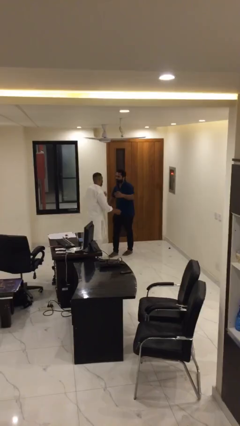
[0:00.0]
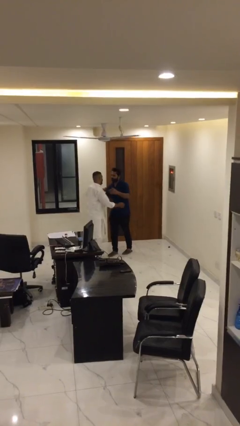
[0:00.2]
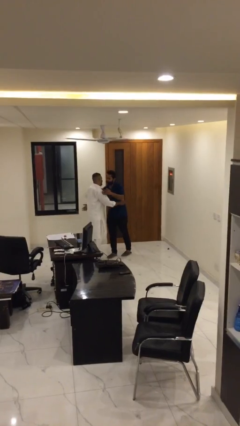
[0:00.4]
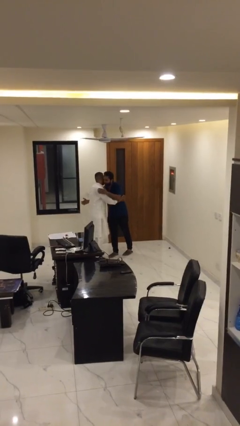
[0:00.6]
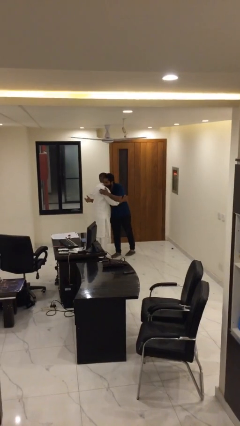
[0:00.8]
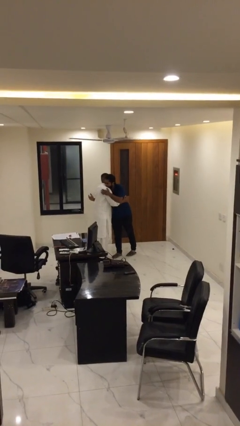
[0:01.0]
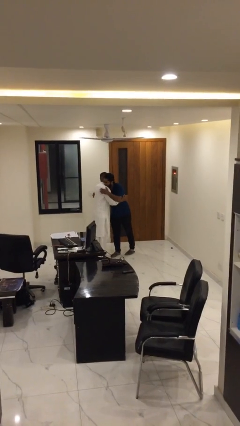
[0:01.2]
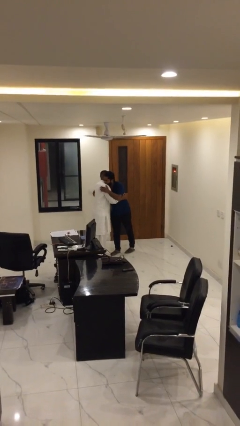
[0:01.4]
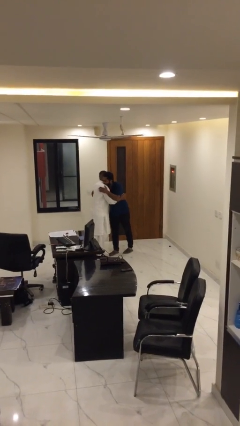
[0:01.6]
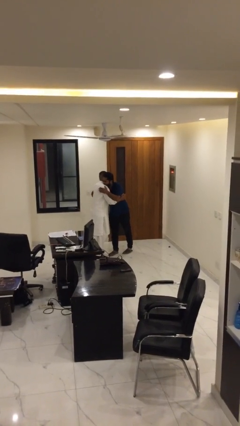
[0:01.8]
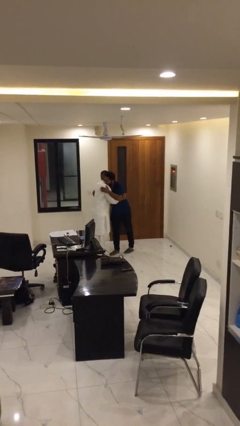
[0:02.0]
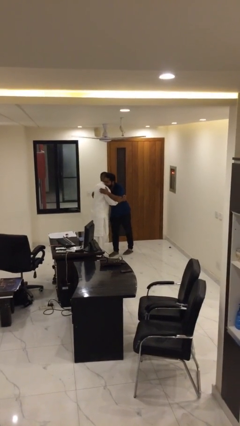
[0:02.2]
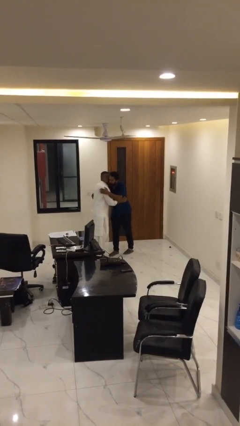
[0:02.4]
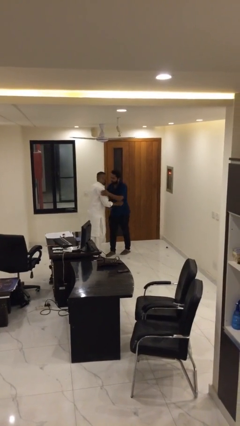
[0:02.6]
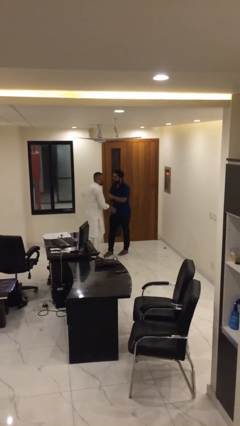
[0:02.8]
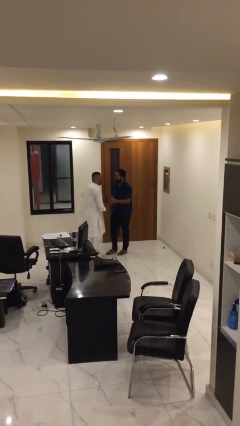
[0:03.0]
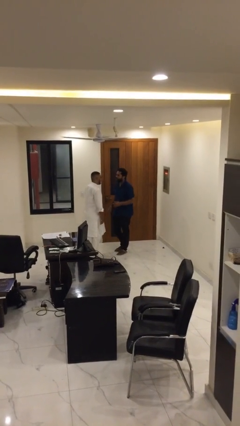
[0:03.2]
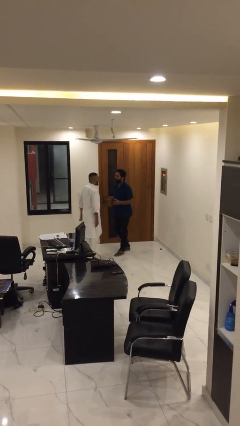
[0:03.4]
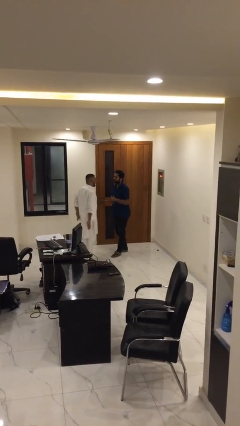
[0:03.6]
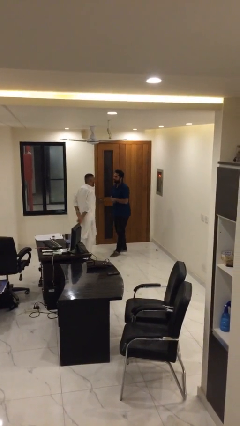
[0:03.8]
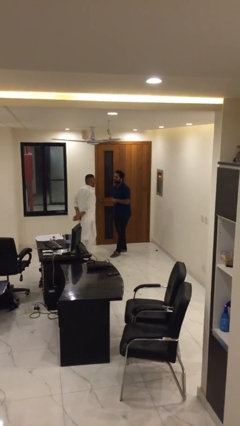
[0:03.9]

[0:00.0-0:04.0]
person embraces person

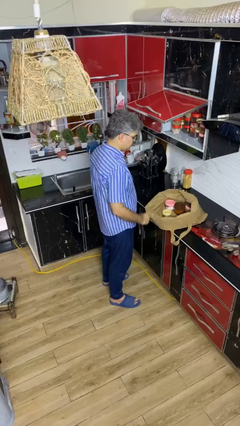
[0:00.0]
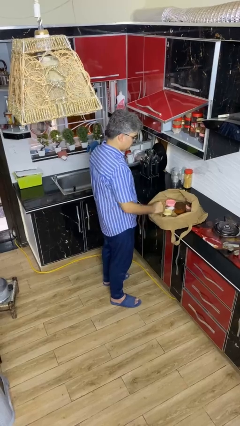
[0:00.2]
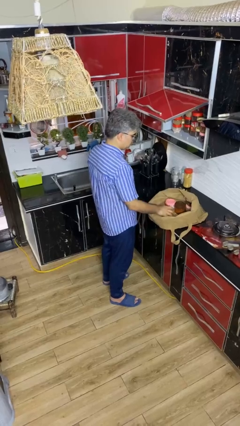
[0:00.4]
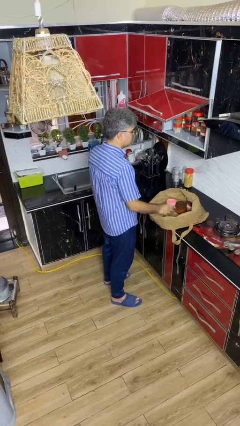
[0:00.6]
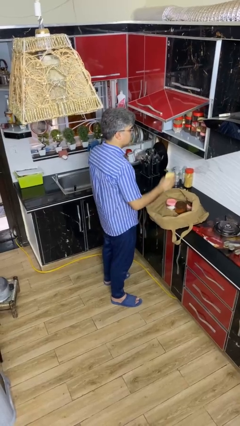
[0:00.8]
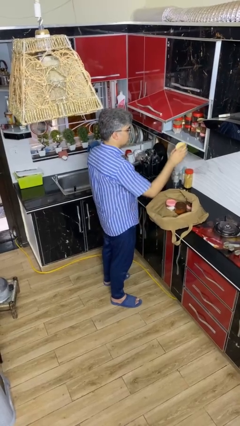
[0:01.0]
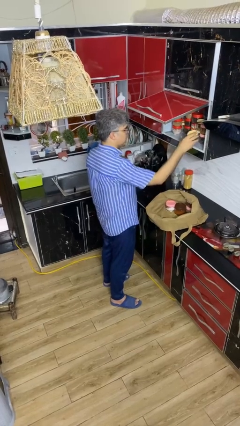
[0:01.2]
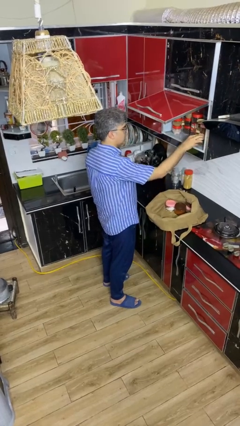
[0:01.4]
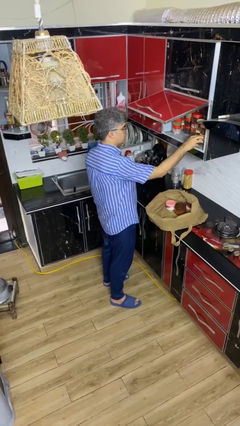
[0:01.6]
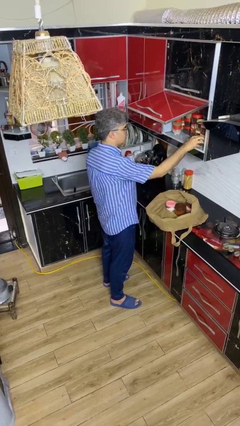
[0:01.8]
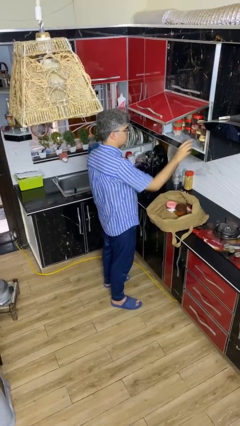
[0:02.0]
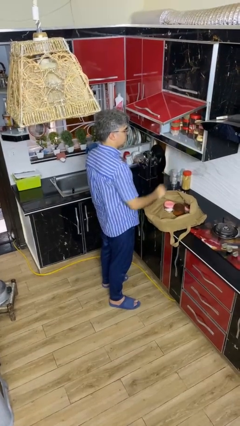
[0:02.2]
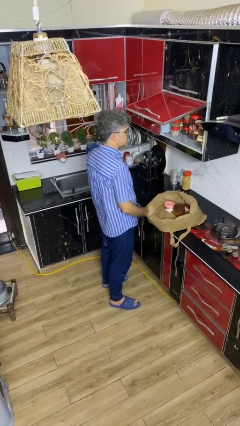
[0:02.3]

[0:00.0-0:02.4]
person loads groceries into cabinet

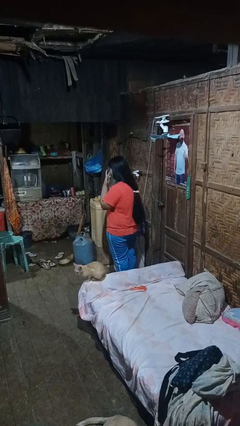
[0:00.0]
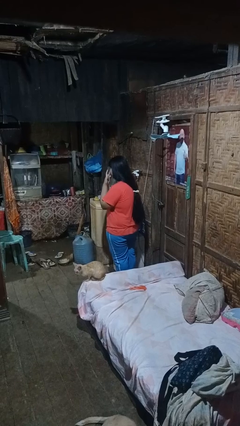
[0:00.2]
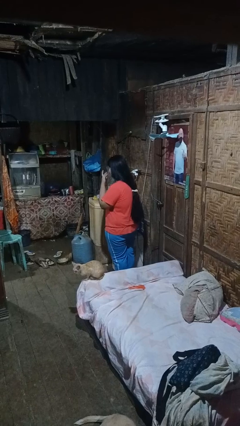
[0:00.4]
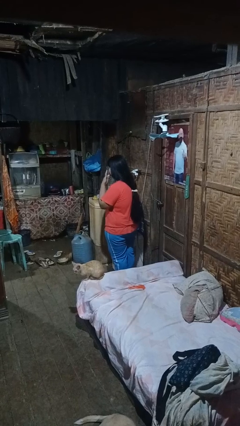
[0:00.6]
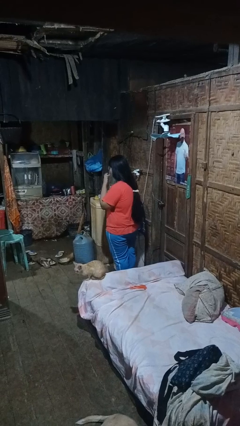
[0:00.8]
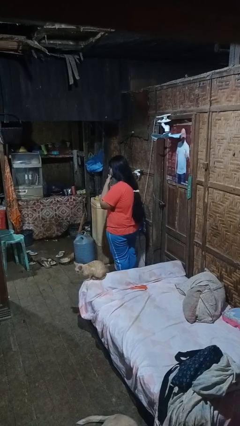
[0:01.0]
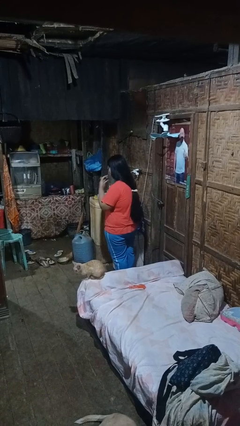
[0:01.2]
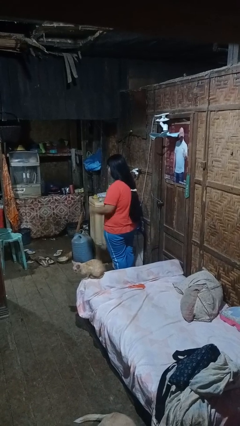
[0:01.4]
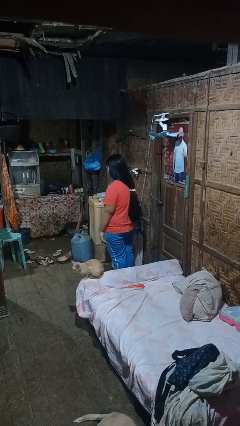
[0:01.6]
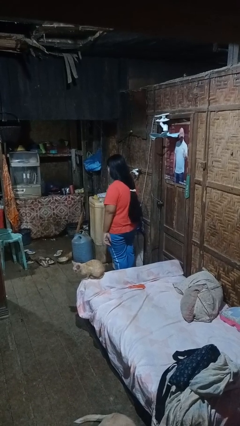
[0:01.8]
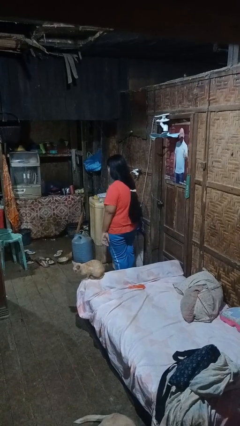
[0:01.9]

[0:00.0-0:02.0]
person licks fingers

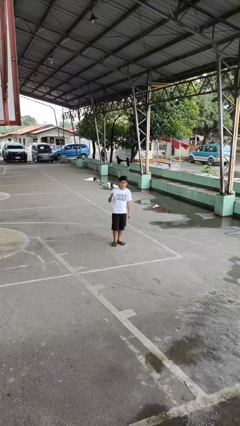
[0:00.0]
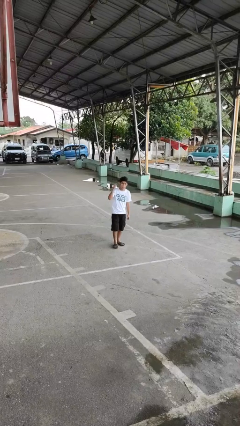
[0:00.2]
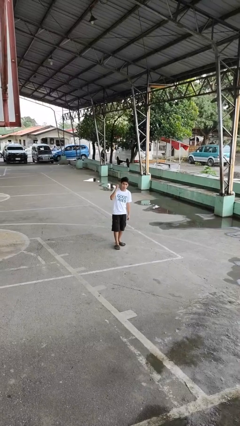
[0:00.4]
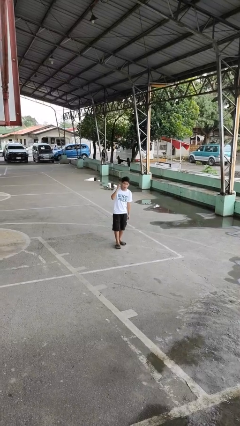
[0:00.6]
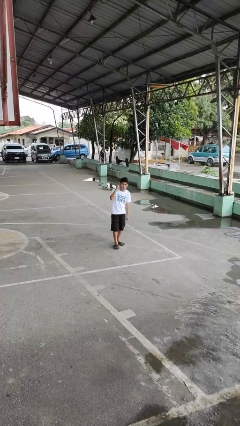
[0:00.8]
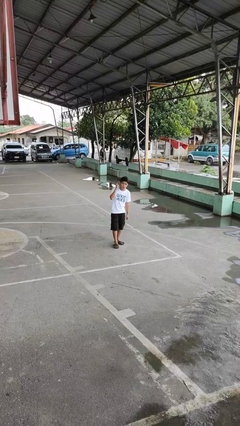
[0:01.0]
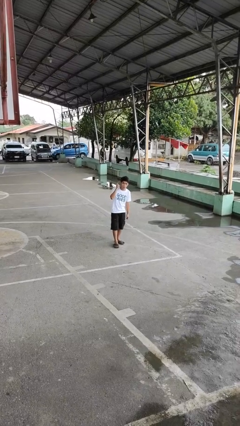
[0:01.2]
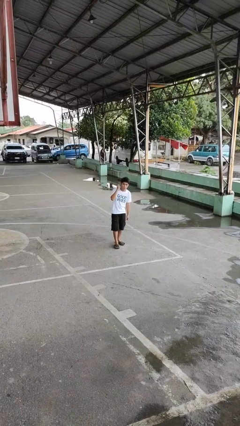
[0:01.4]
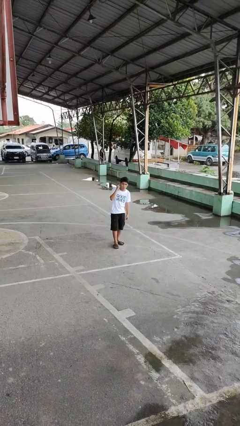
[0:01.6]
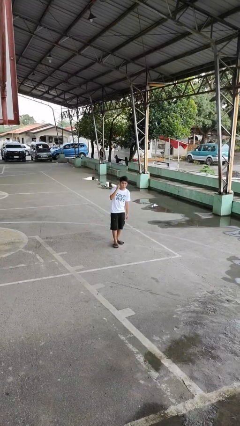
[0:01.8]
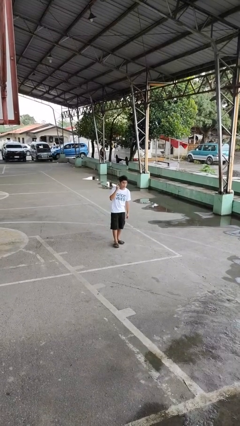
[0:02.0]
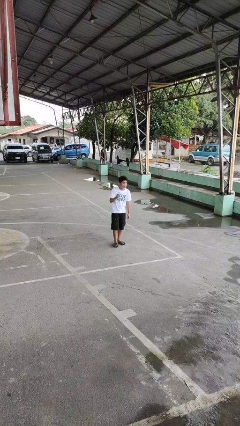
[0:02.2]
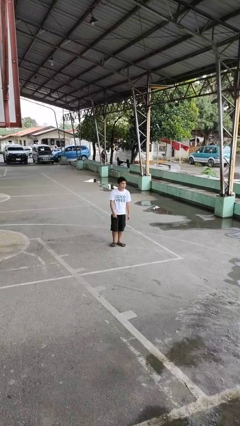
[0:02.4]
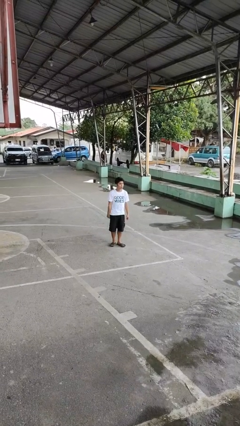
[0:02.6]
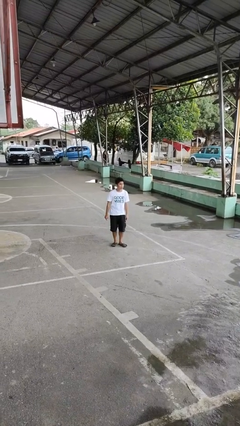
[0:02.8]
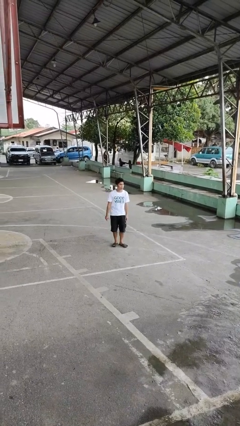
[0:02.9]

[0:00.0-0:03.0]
person gestures listen closely

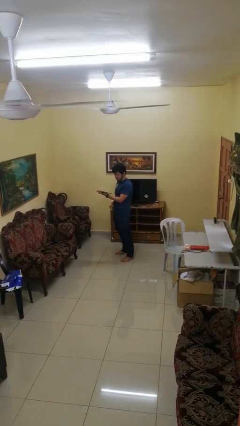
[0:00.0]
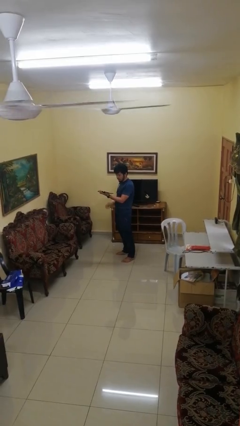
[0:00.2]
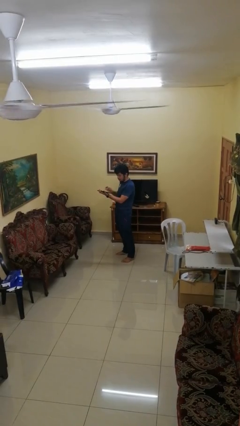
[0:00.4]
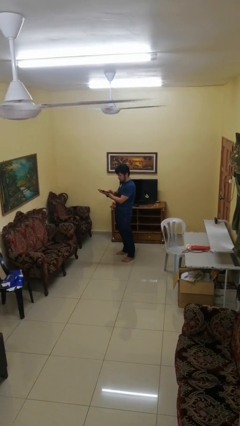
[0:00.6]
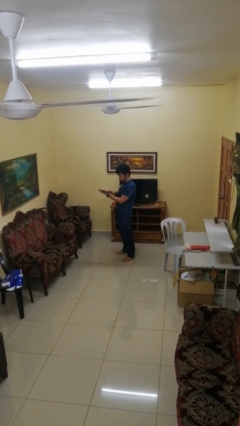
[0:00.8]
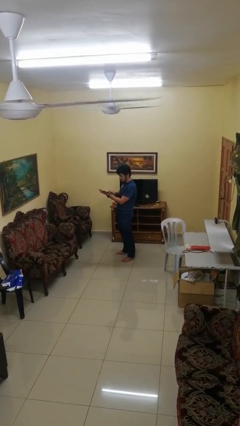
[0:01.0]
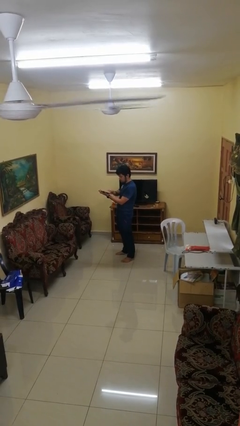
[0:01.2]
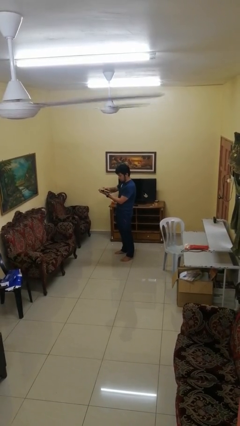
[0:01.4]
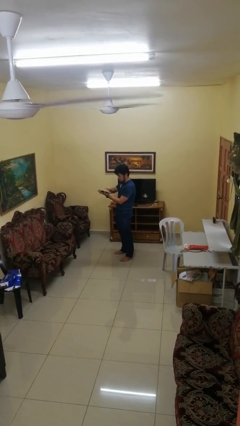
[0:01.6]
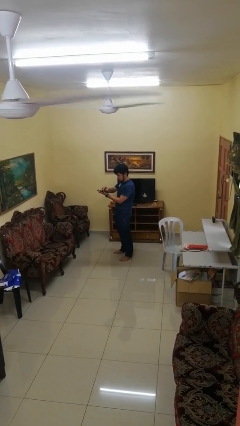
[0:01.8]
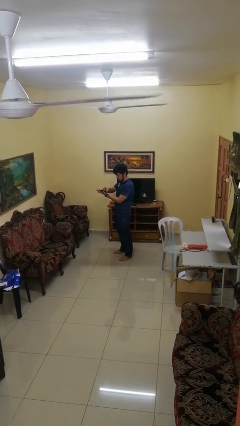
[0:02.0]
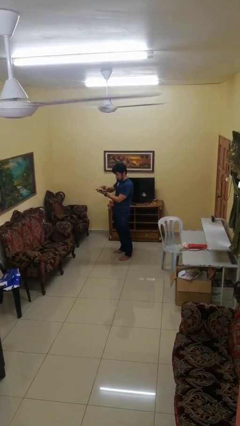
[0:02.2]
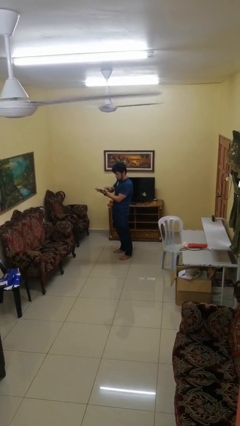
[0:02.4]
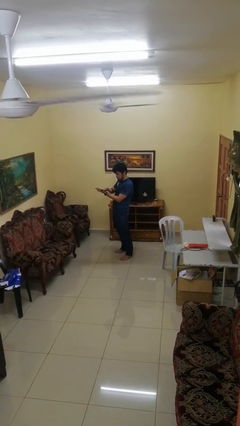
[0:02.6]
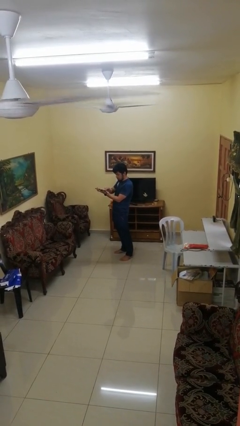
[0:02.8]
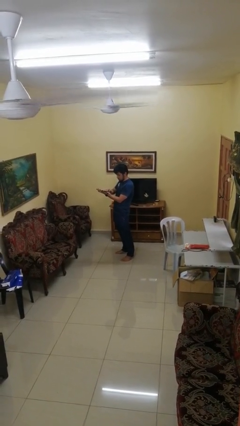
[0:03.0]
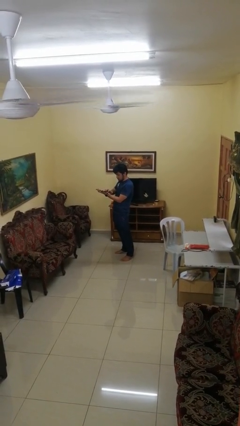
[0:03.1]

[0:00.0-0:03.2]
person interacts with tablet

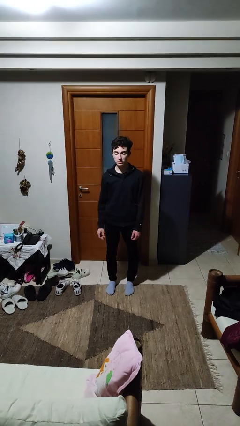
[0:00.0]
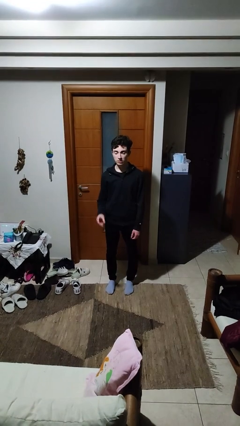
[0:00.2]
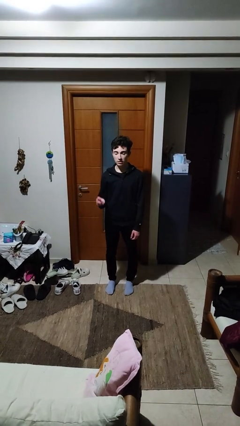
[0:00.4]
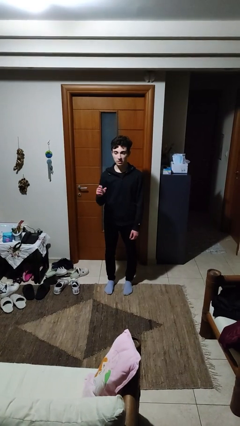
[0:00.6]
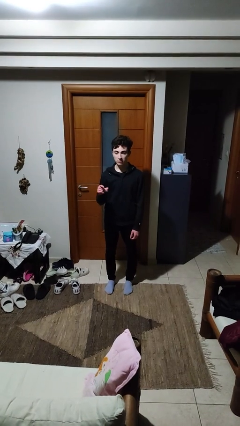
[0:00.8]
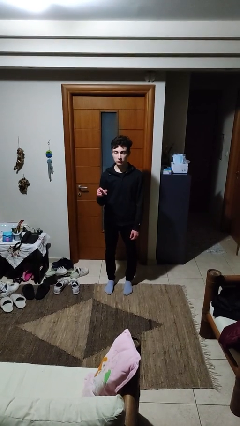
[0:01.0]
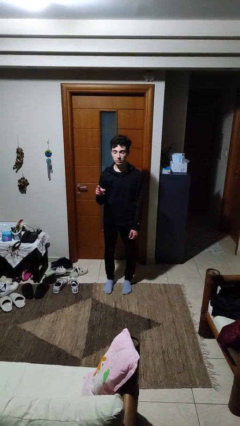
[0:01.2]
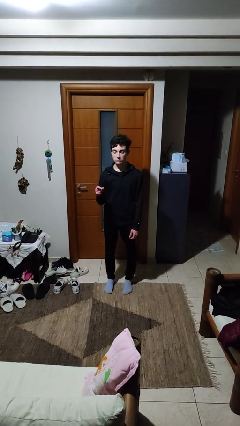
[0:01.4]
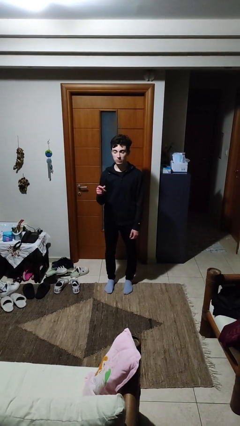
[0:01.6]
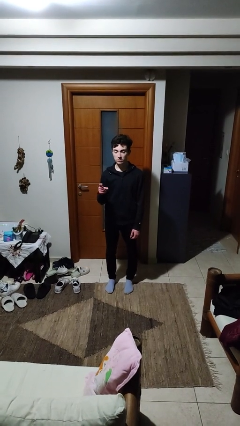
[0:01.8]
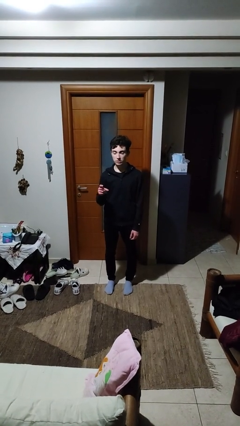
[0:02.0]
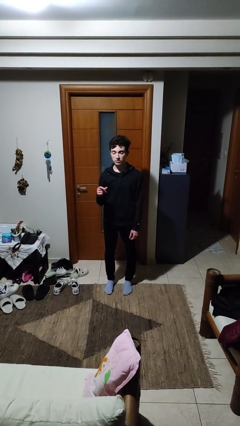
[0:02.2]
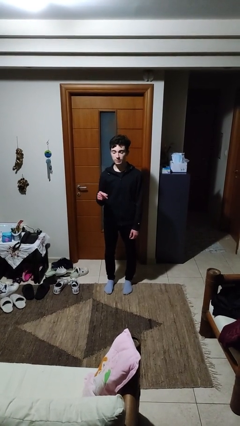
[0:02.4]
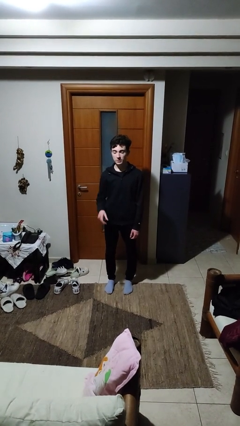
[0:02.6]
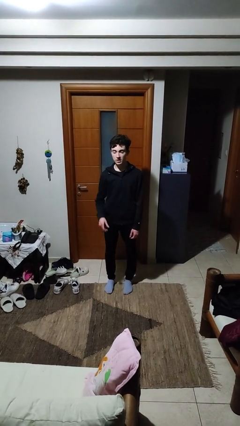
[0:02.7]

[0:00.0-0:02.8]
person snaps fingers
